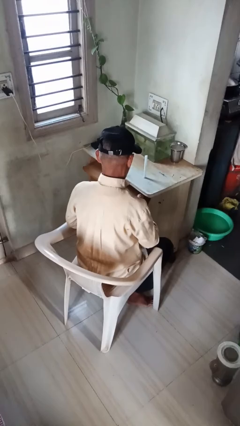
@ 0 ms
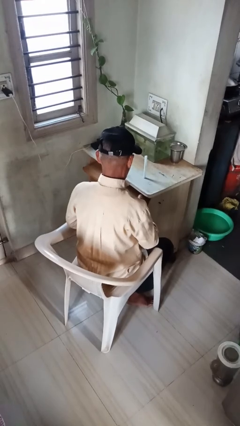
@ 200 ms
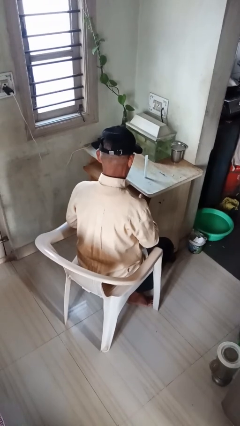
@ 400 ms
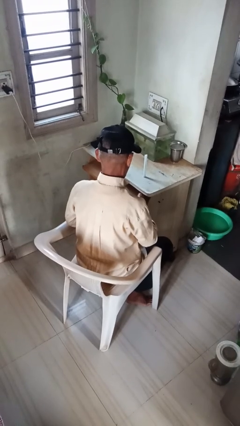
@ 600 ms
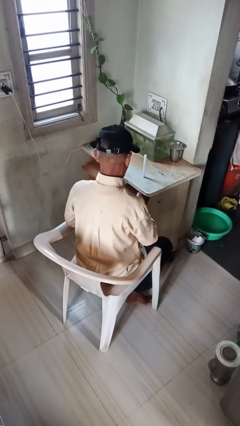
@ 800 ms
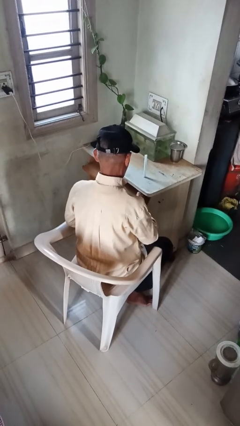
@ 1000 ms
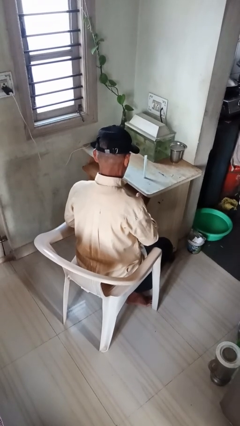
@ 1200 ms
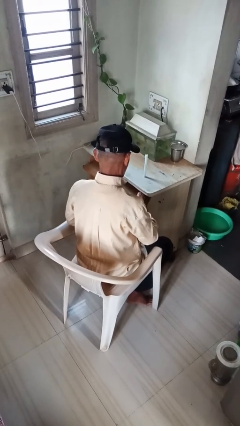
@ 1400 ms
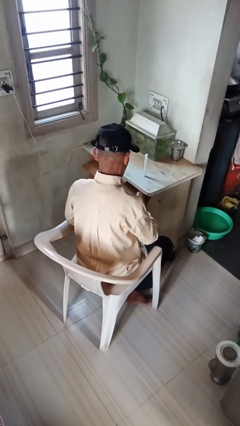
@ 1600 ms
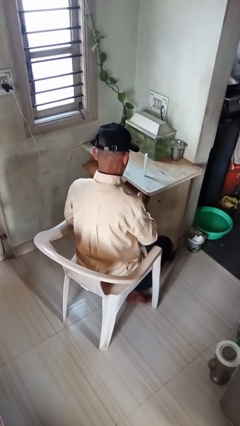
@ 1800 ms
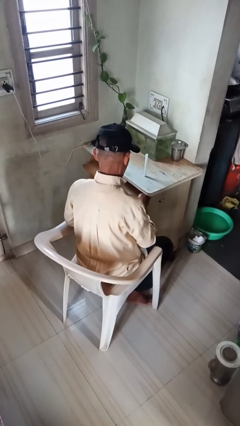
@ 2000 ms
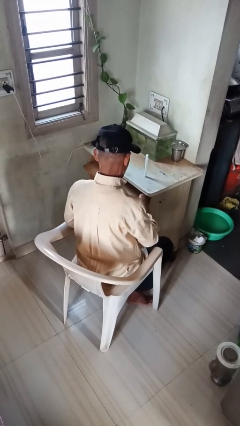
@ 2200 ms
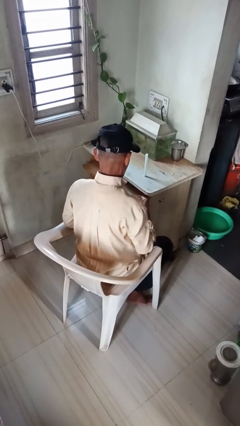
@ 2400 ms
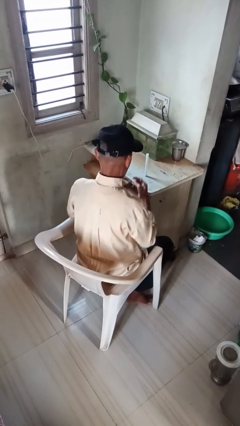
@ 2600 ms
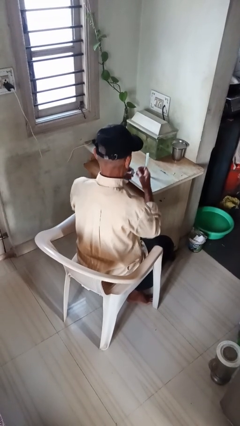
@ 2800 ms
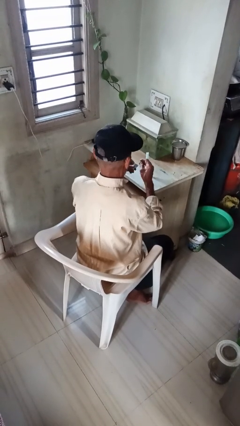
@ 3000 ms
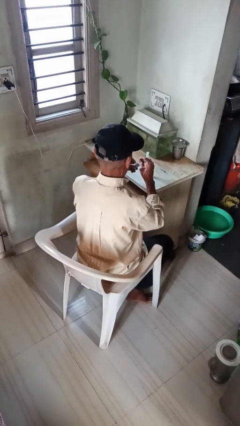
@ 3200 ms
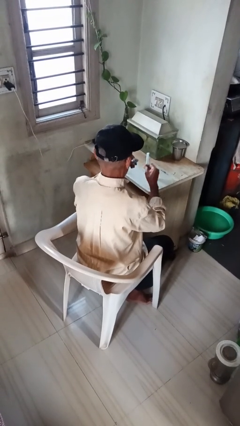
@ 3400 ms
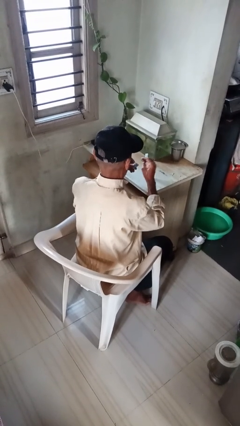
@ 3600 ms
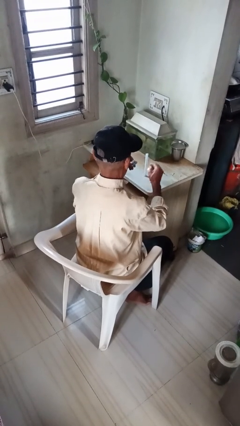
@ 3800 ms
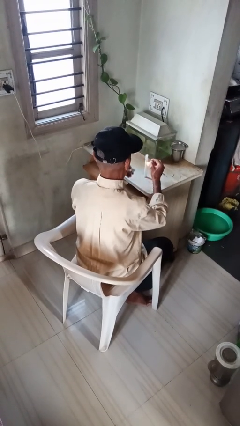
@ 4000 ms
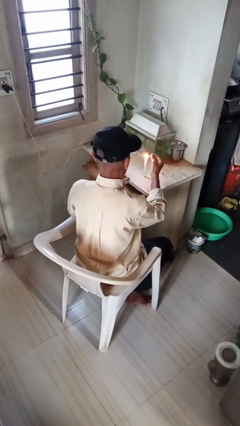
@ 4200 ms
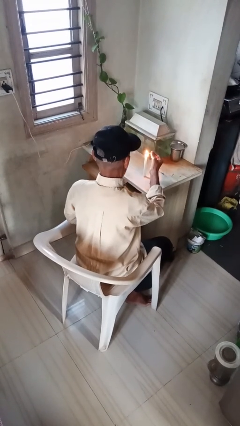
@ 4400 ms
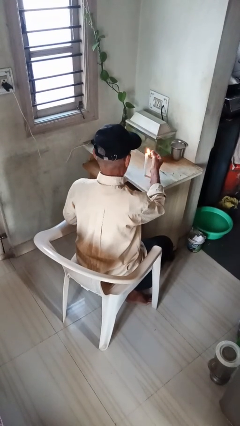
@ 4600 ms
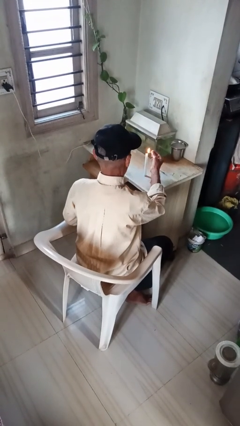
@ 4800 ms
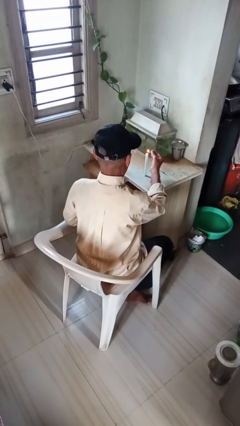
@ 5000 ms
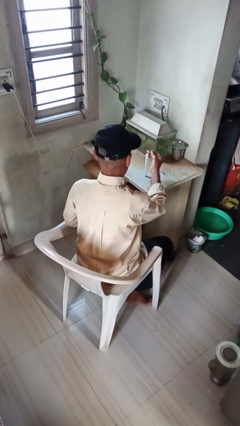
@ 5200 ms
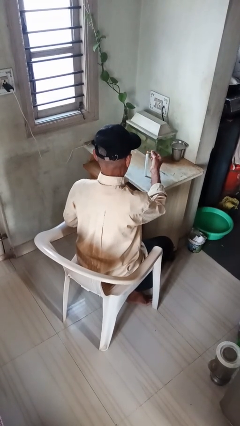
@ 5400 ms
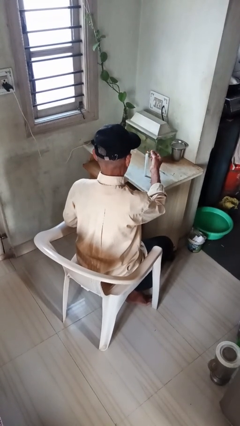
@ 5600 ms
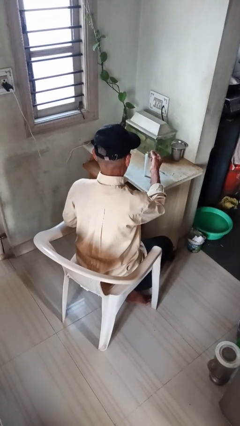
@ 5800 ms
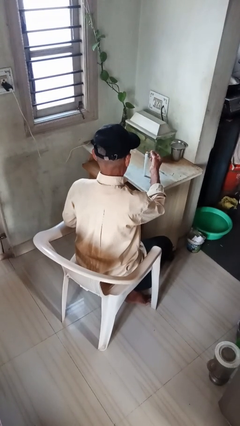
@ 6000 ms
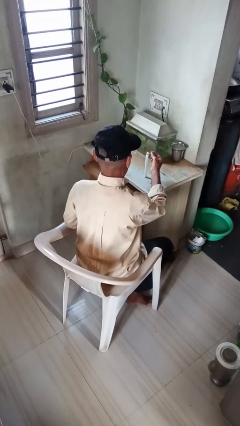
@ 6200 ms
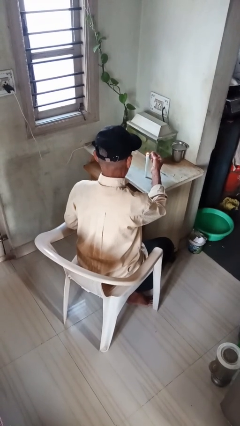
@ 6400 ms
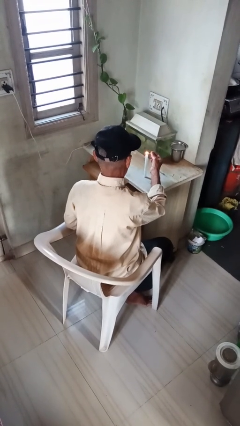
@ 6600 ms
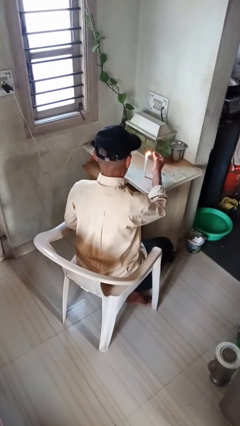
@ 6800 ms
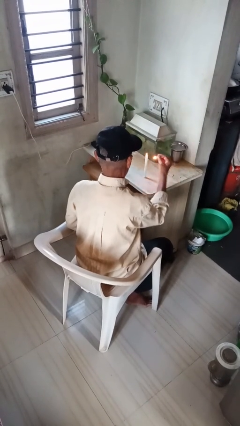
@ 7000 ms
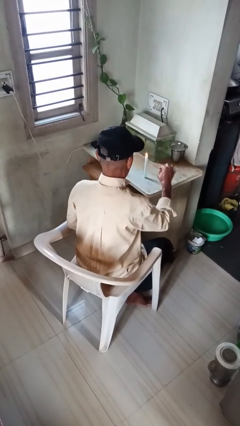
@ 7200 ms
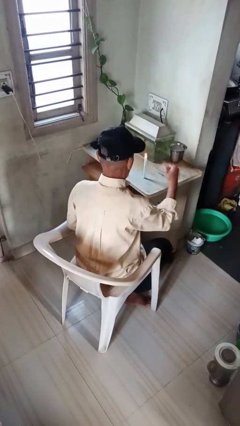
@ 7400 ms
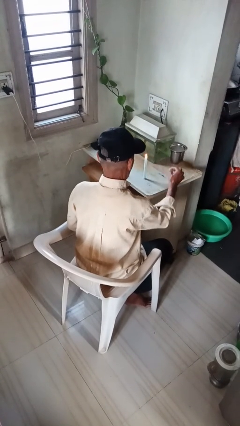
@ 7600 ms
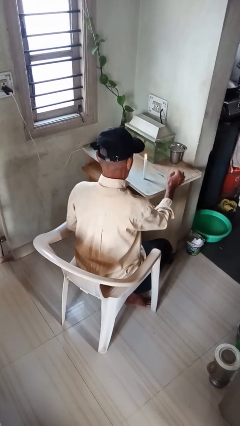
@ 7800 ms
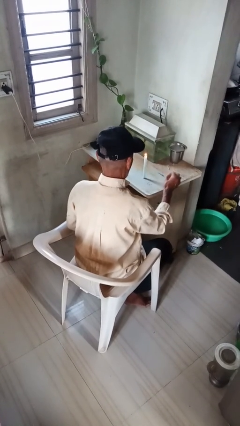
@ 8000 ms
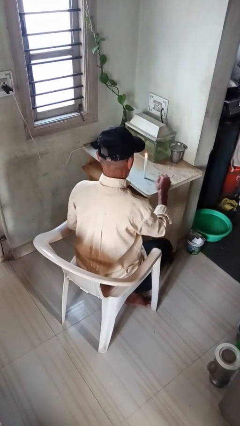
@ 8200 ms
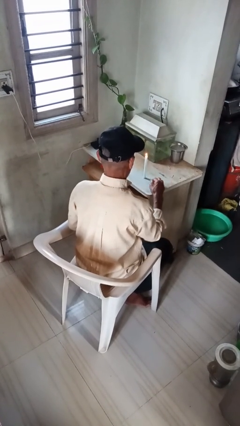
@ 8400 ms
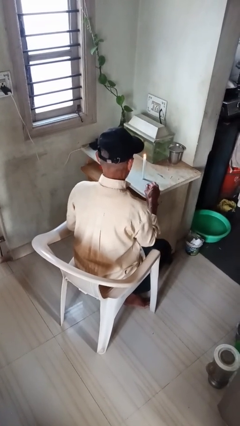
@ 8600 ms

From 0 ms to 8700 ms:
person lights candle

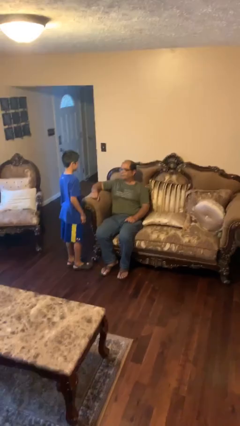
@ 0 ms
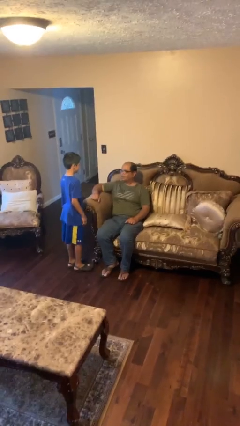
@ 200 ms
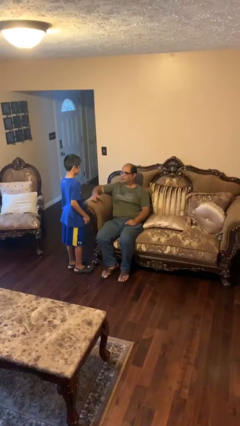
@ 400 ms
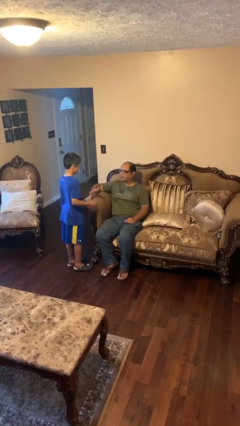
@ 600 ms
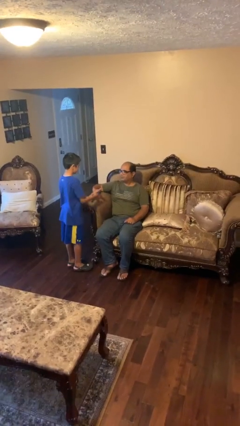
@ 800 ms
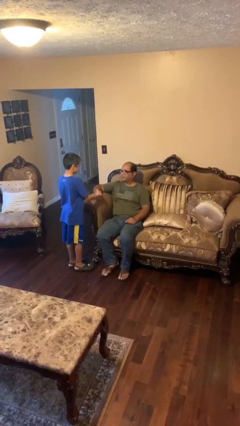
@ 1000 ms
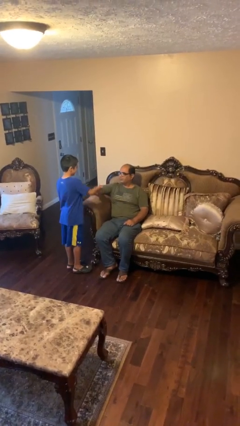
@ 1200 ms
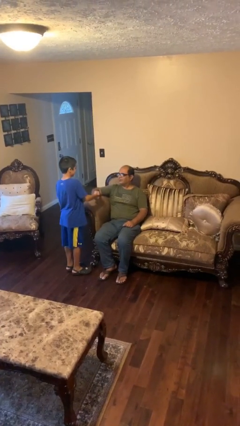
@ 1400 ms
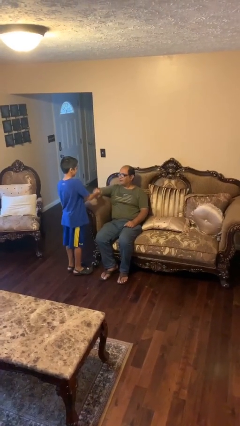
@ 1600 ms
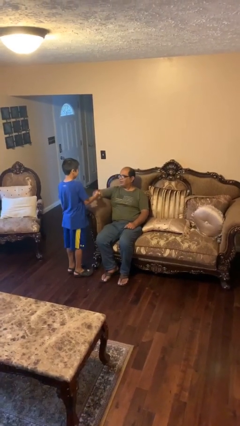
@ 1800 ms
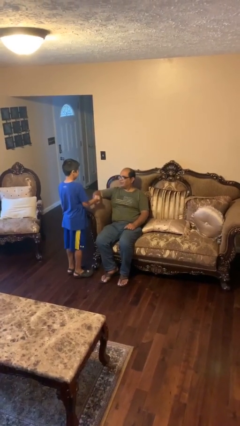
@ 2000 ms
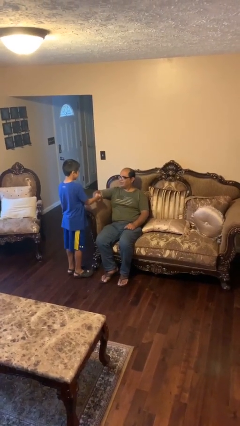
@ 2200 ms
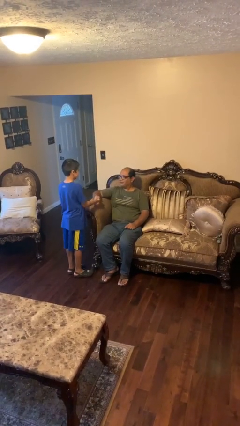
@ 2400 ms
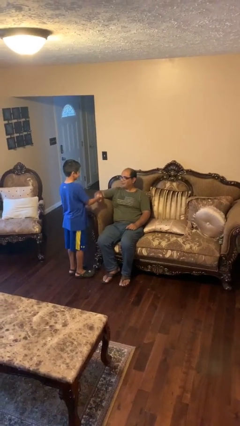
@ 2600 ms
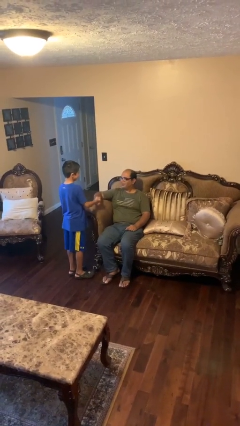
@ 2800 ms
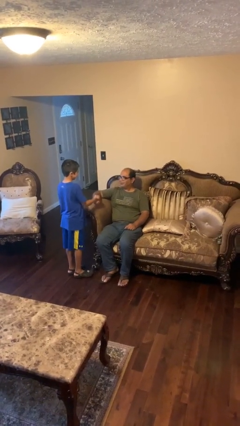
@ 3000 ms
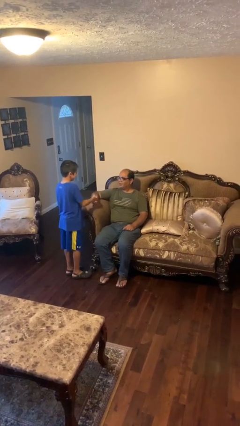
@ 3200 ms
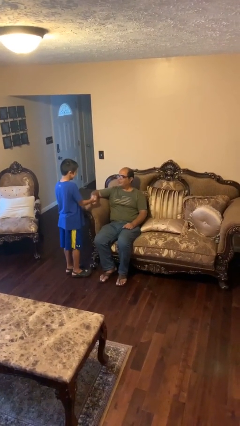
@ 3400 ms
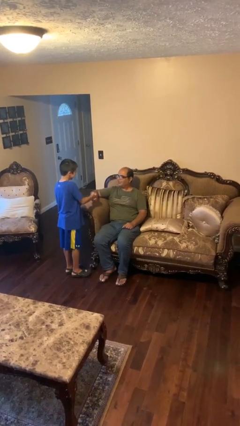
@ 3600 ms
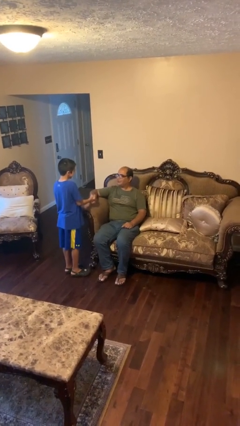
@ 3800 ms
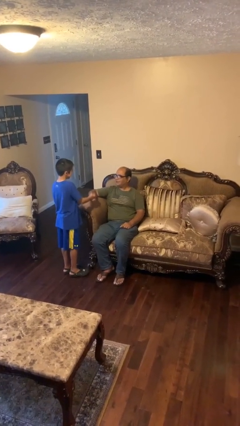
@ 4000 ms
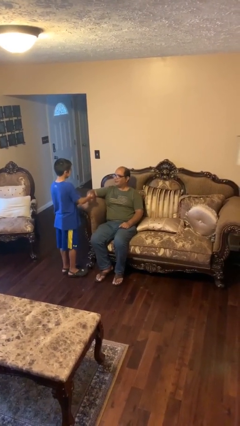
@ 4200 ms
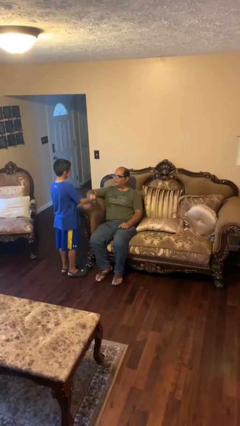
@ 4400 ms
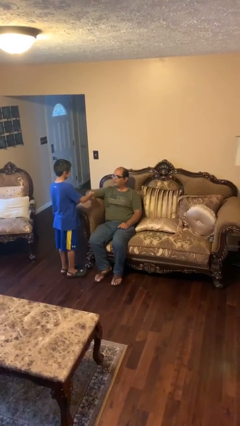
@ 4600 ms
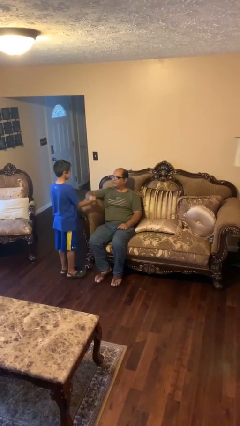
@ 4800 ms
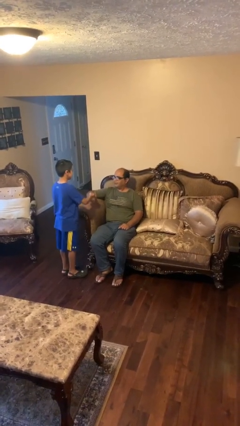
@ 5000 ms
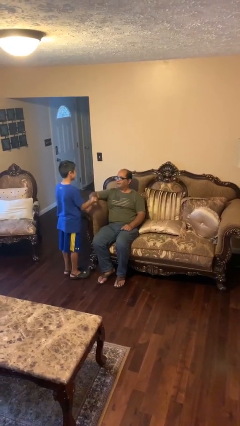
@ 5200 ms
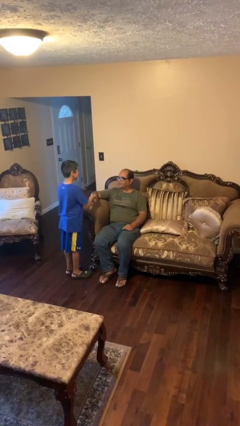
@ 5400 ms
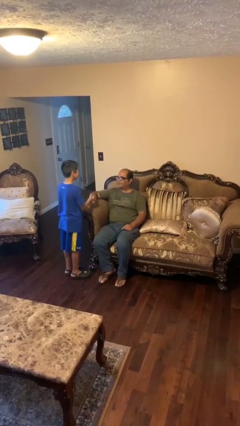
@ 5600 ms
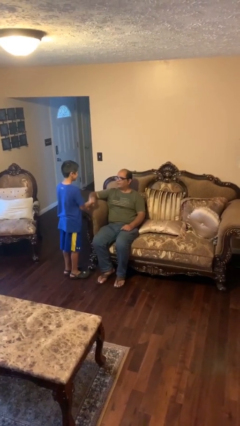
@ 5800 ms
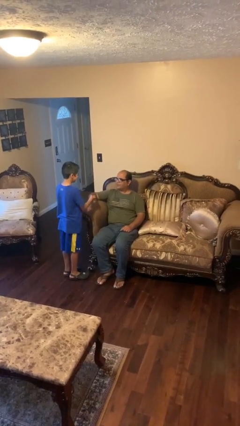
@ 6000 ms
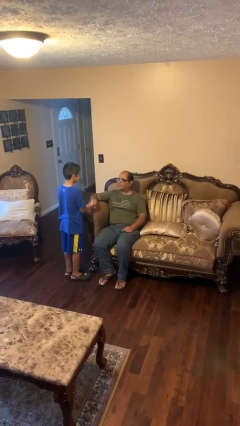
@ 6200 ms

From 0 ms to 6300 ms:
person shakes hand

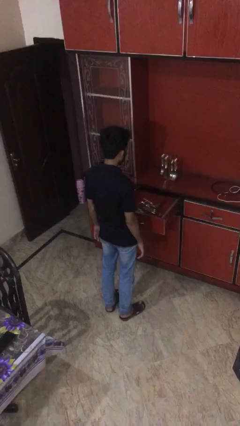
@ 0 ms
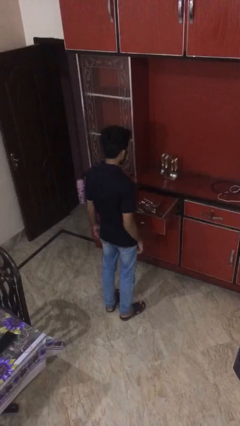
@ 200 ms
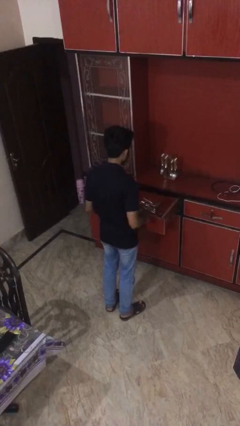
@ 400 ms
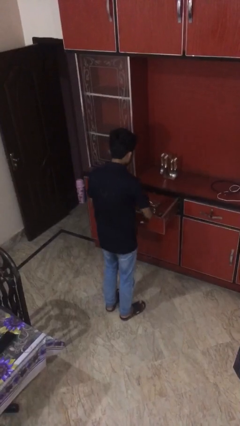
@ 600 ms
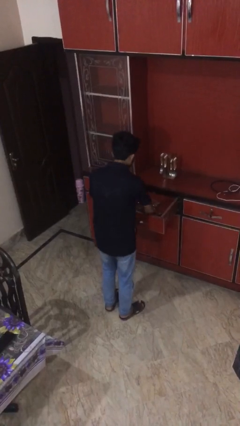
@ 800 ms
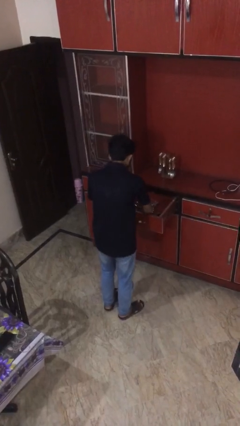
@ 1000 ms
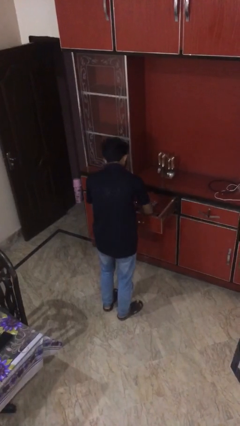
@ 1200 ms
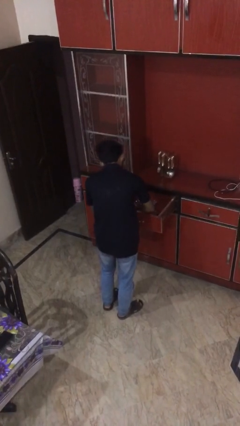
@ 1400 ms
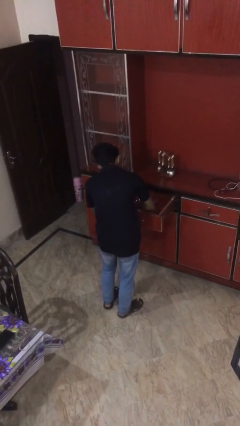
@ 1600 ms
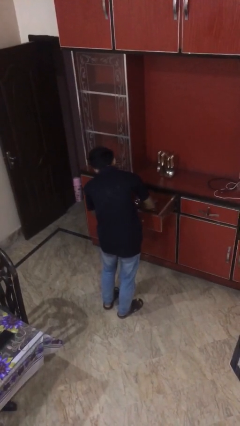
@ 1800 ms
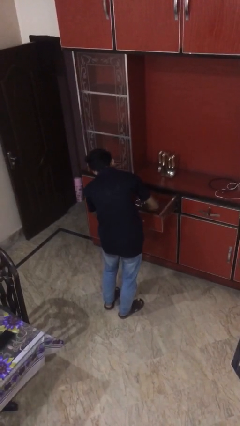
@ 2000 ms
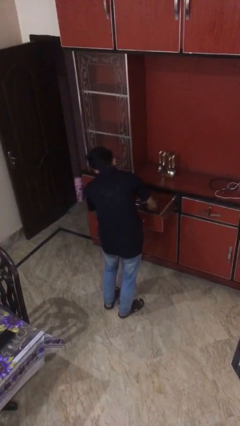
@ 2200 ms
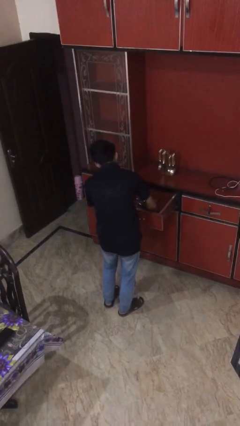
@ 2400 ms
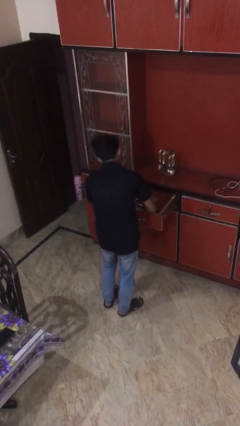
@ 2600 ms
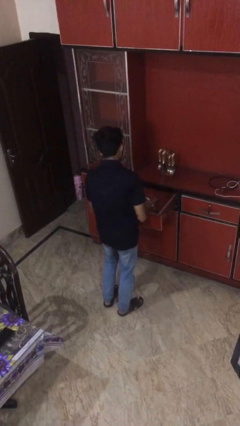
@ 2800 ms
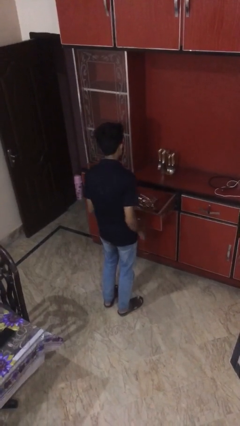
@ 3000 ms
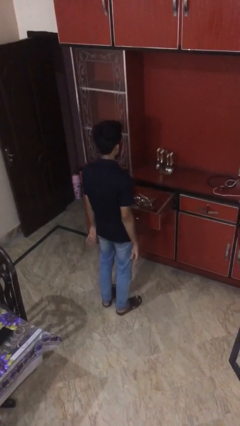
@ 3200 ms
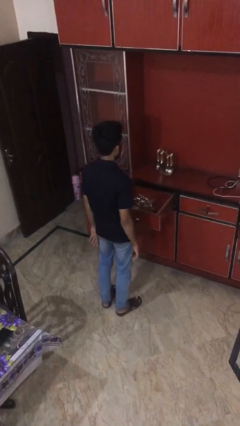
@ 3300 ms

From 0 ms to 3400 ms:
person searches in kitchen drawer
